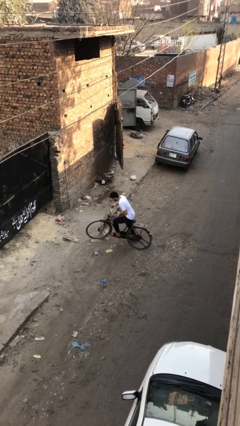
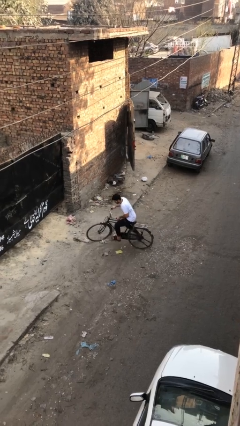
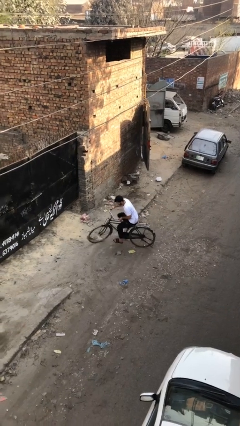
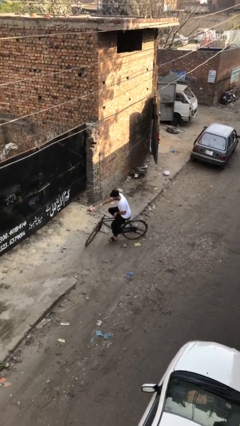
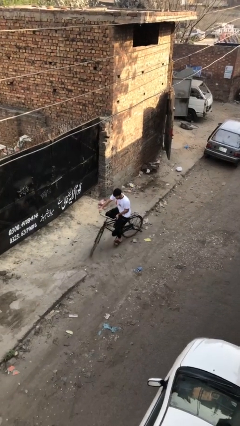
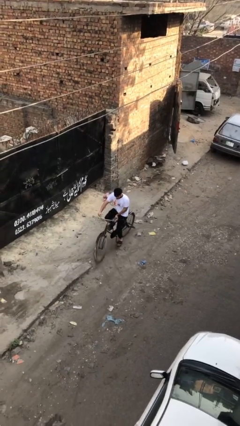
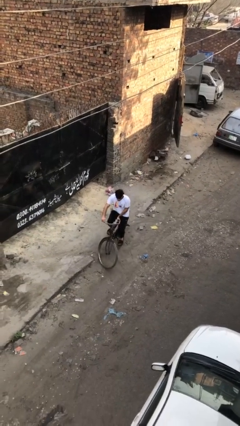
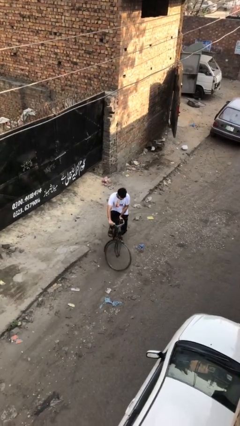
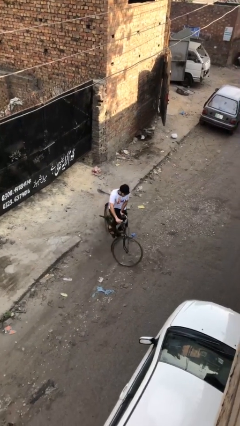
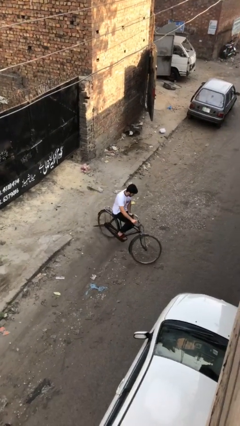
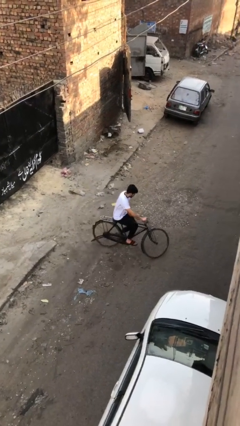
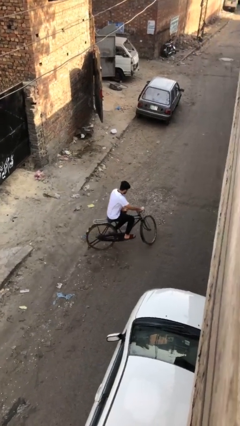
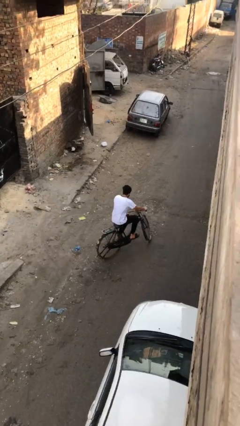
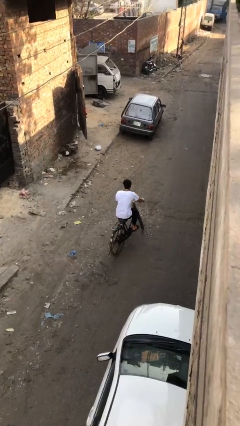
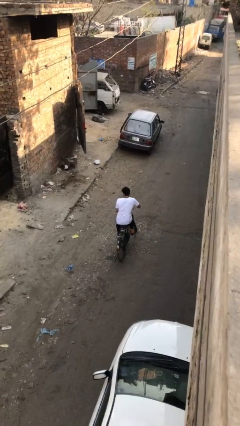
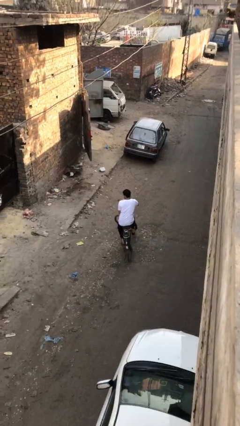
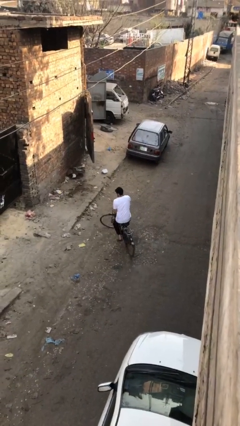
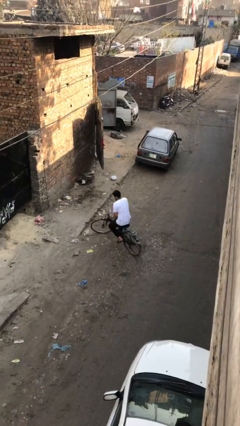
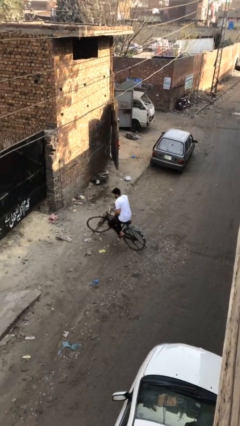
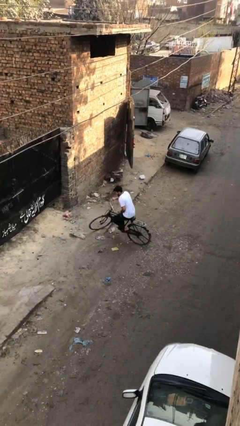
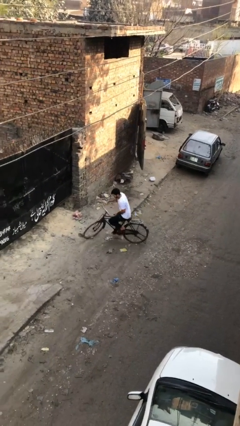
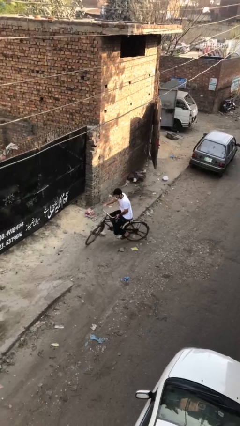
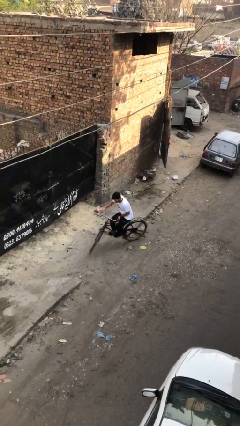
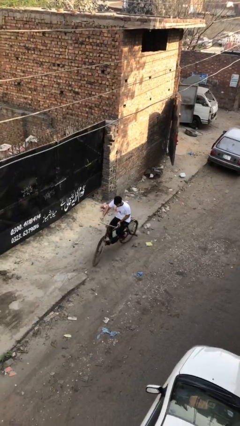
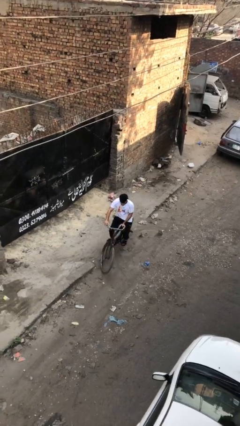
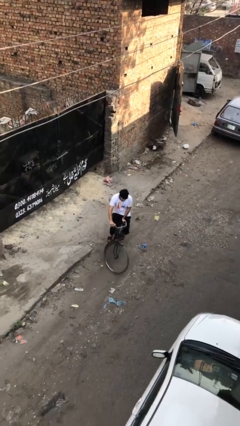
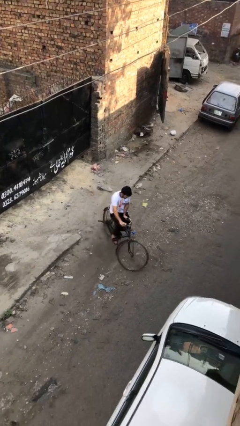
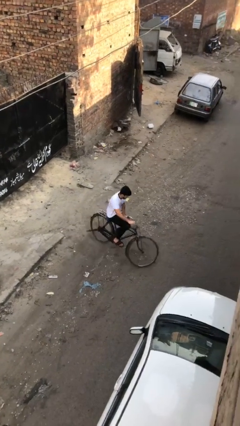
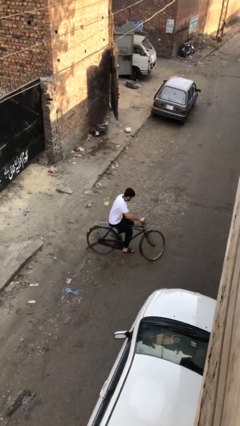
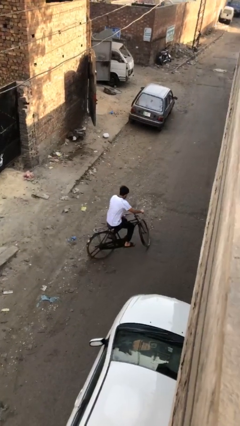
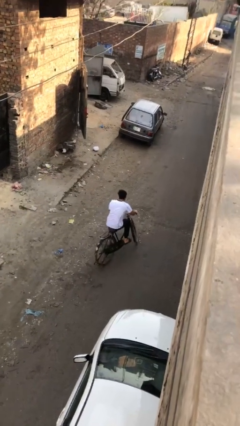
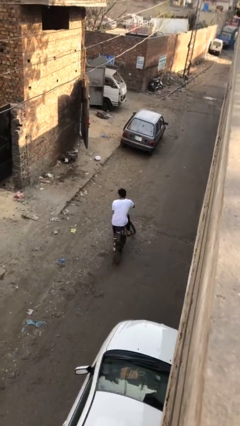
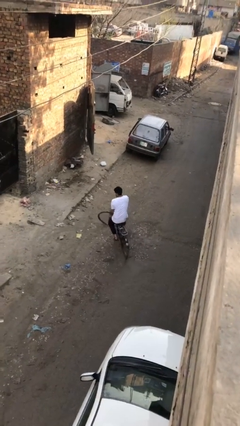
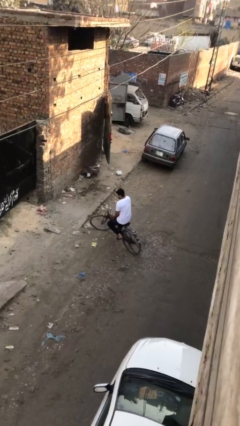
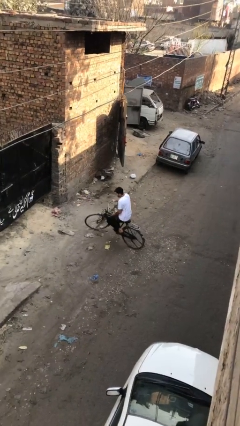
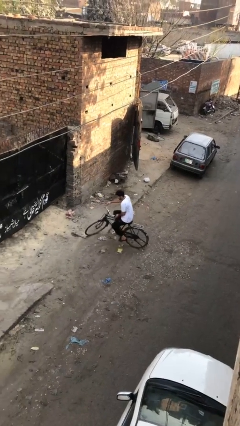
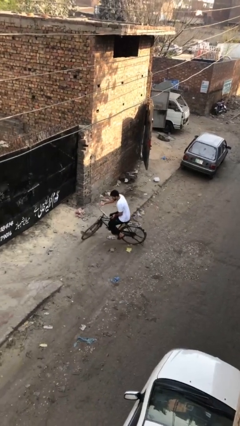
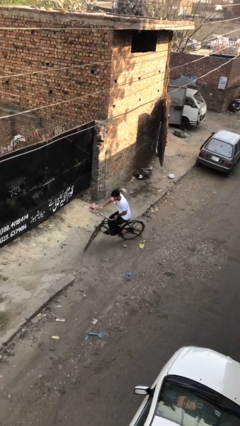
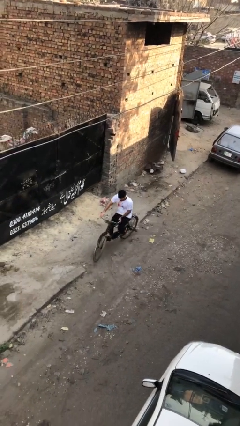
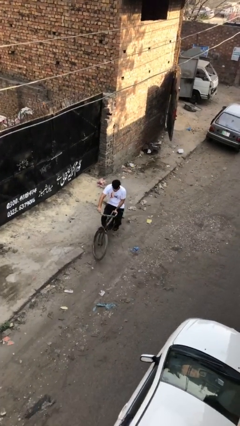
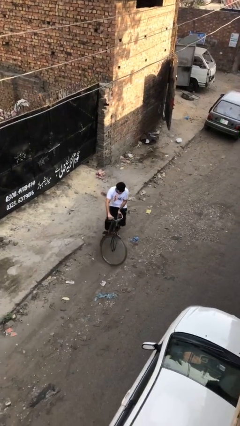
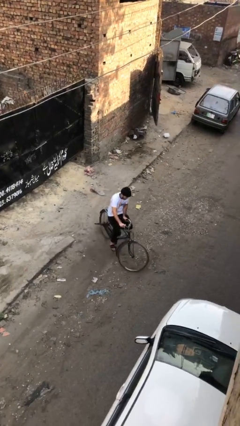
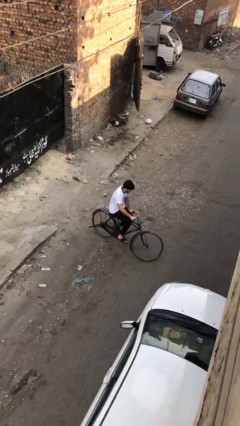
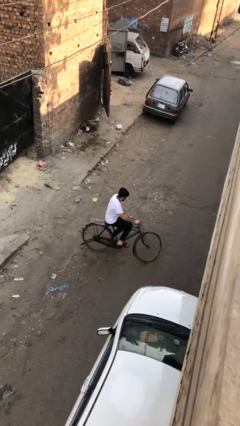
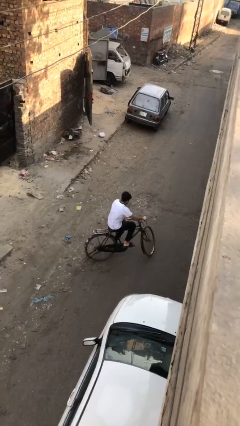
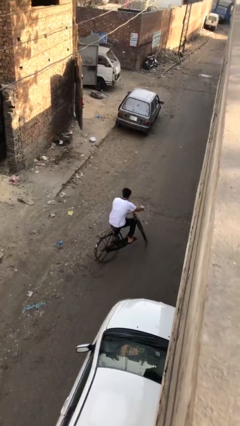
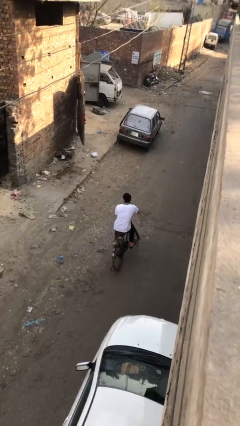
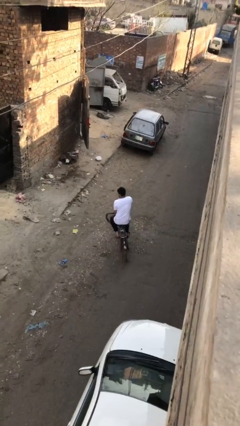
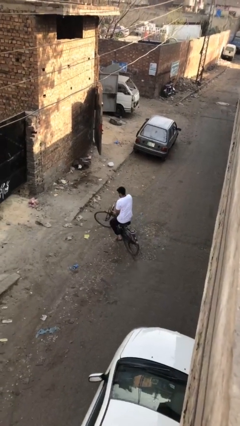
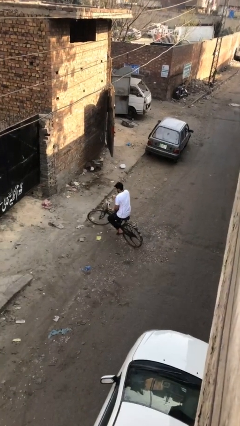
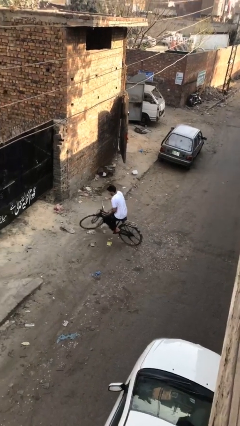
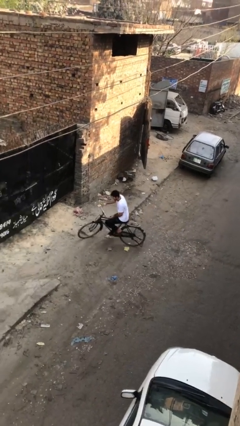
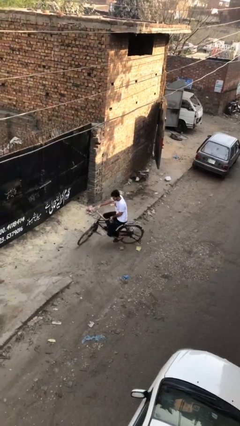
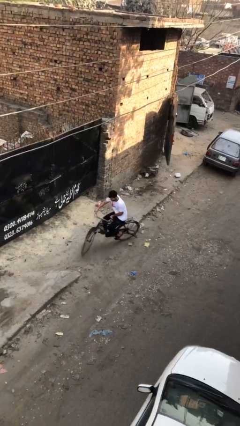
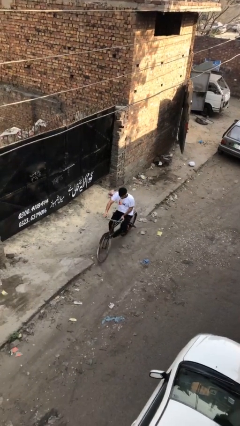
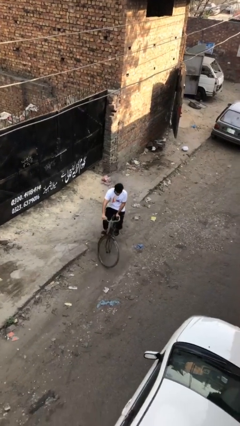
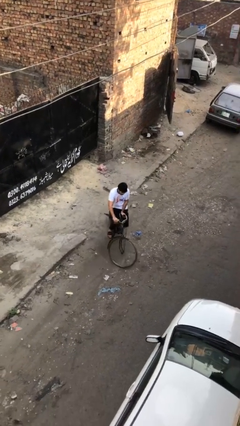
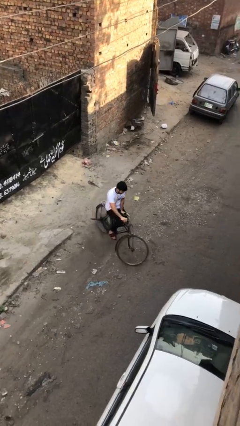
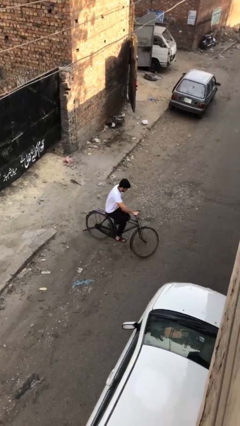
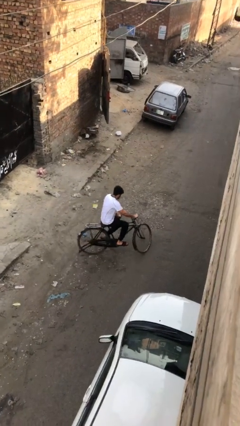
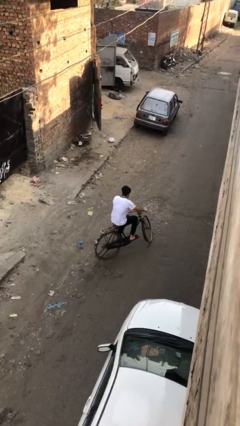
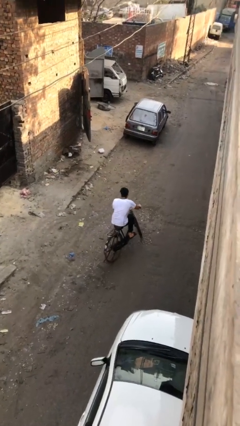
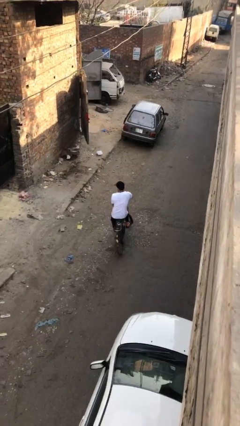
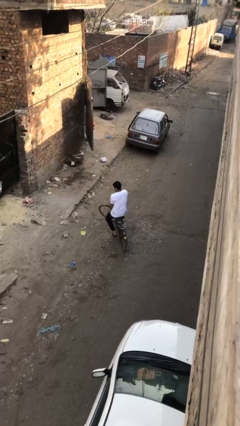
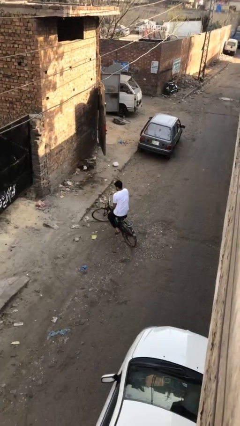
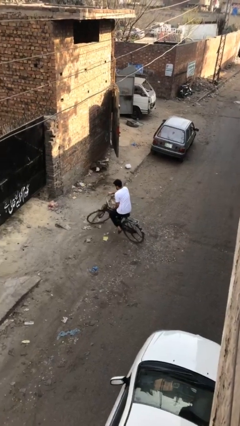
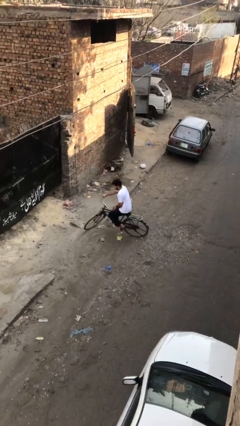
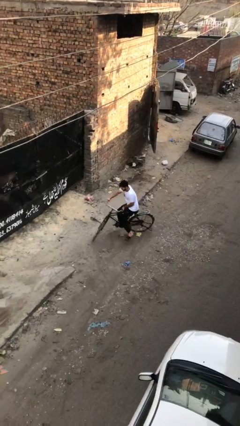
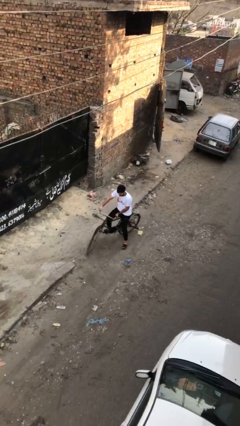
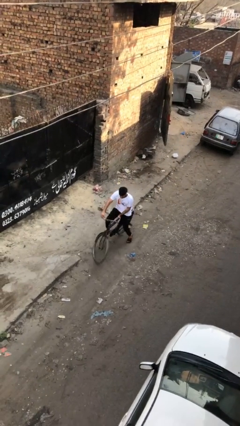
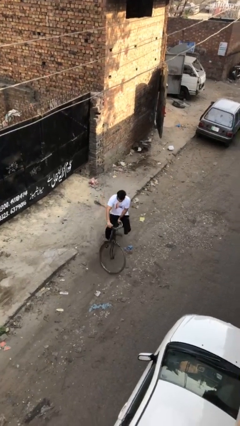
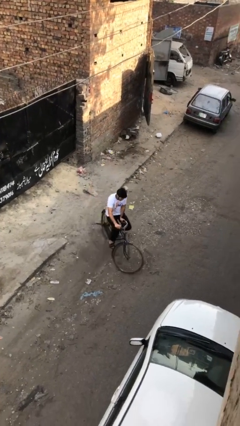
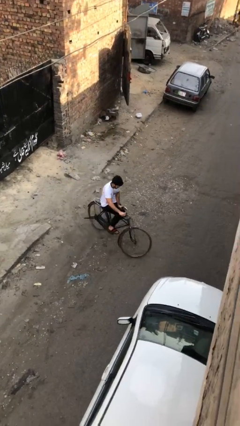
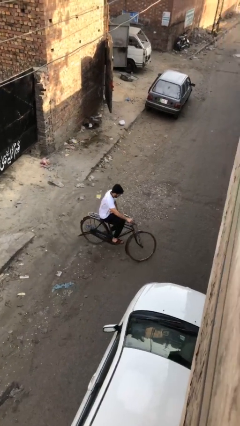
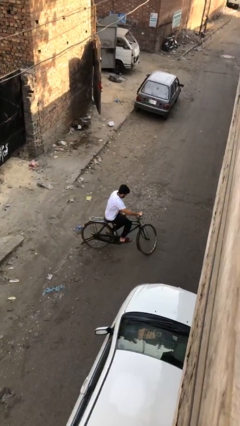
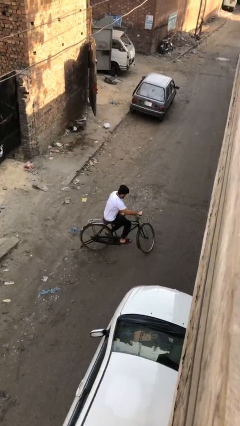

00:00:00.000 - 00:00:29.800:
person rides bicycle

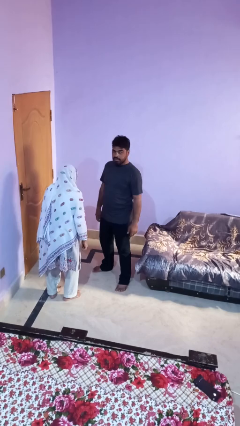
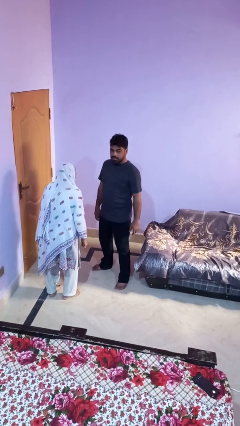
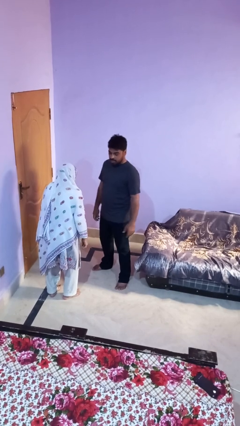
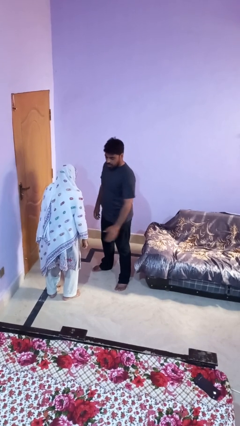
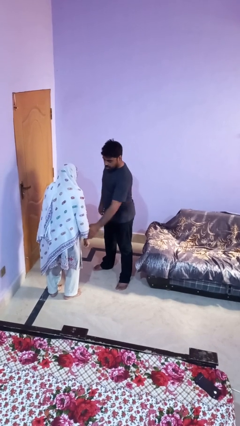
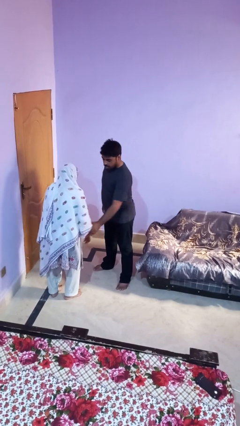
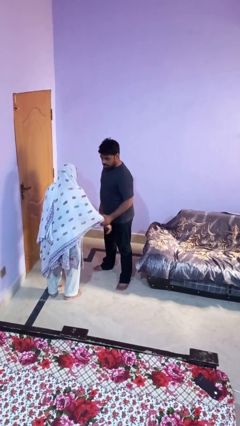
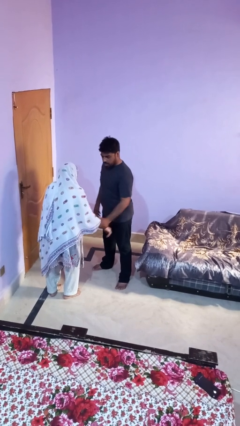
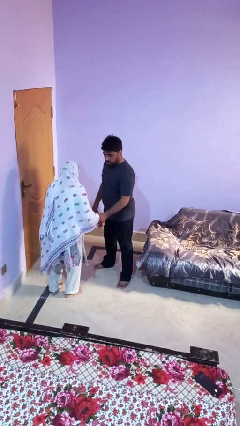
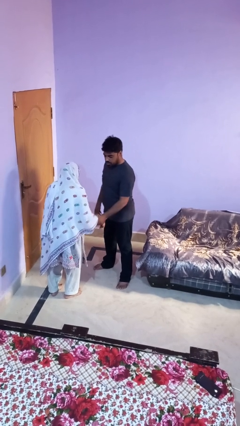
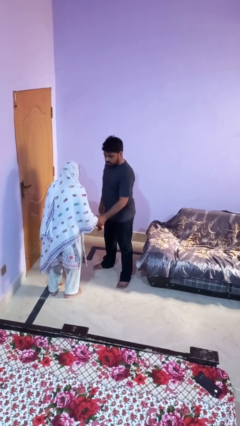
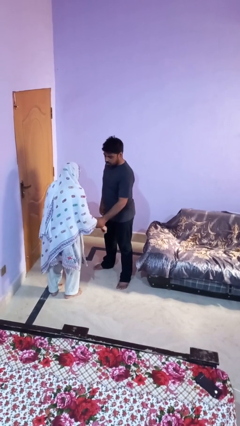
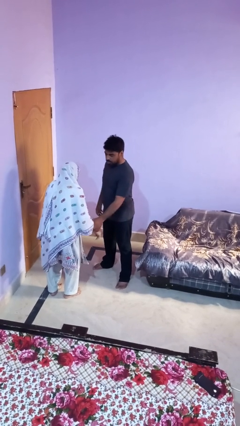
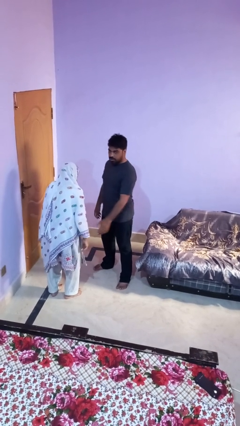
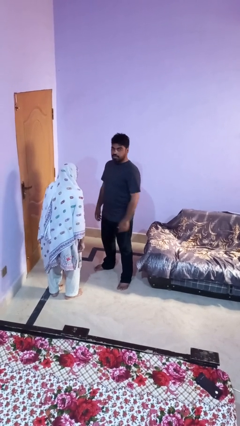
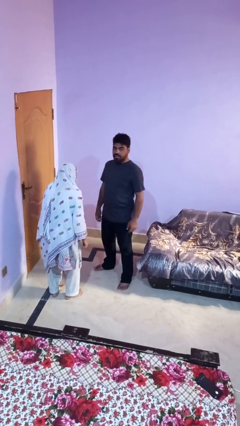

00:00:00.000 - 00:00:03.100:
person grabs person by forearm
